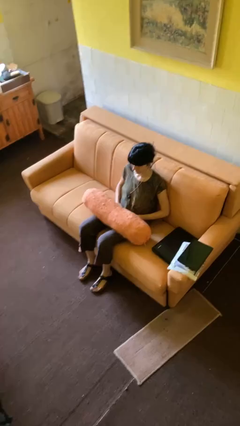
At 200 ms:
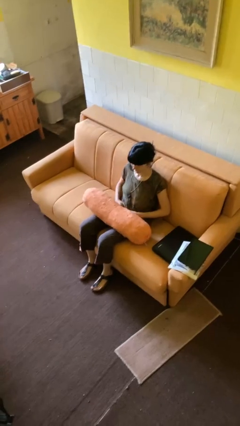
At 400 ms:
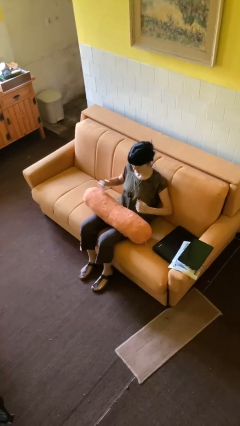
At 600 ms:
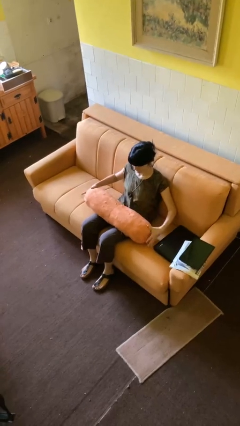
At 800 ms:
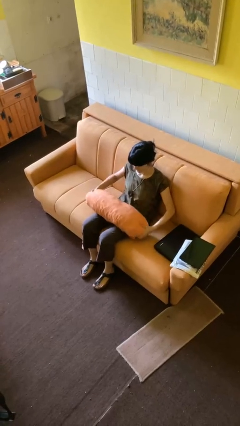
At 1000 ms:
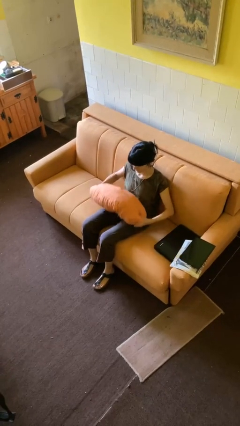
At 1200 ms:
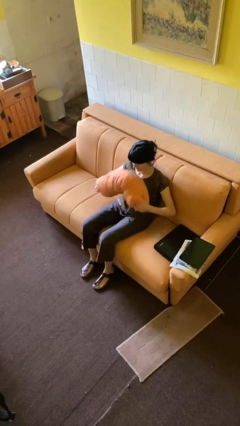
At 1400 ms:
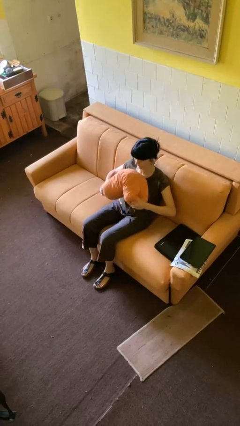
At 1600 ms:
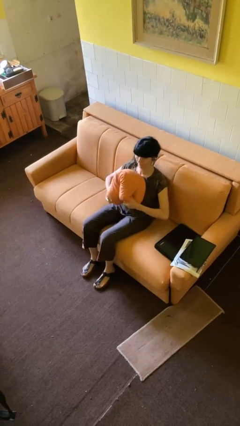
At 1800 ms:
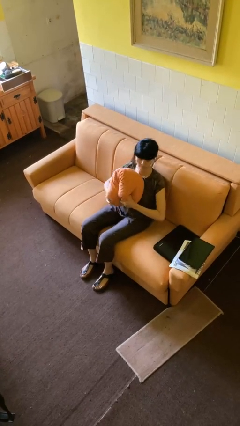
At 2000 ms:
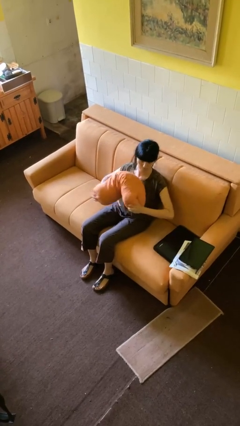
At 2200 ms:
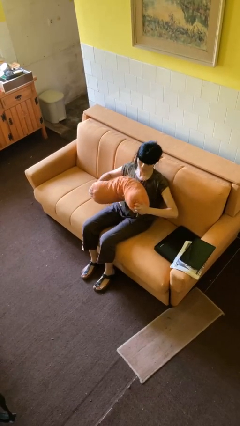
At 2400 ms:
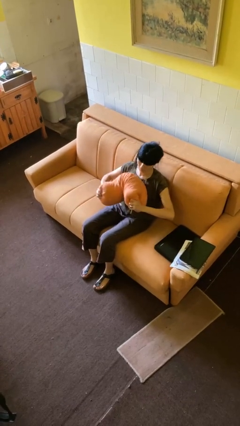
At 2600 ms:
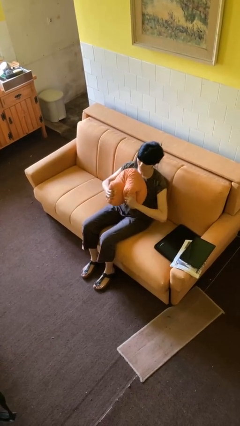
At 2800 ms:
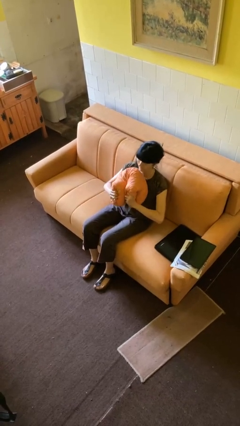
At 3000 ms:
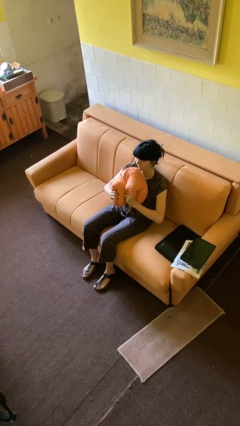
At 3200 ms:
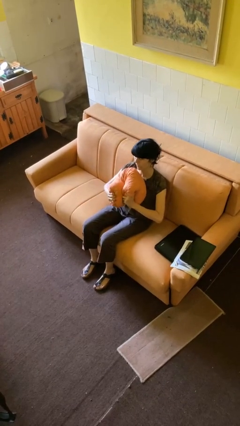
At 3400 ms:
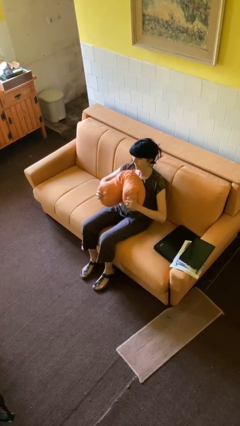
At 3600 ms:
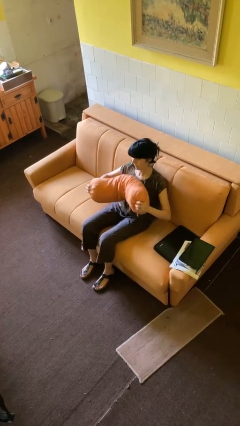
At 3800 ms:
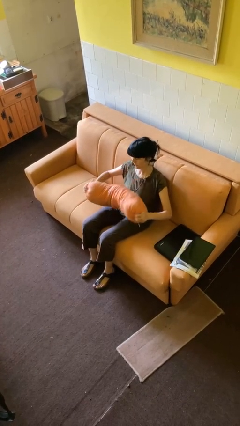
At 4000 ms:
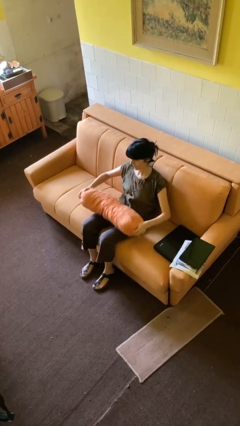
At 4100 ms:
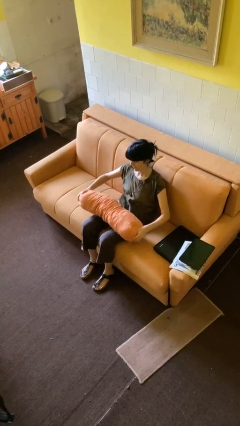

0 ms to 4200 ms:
person squeezes object

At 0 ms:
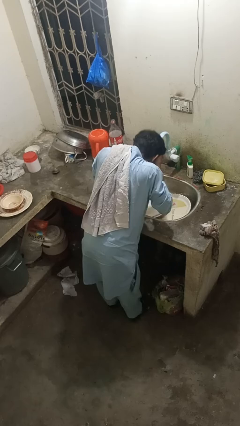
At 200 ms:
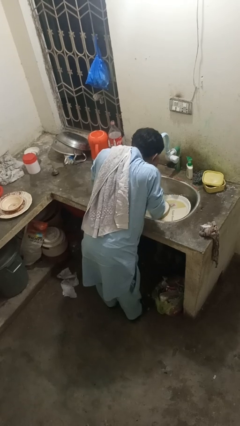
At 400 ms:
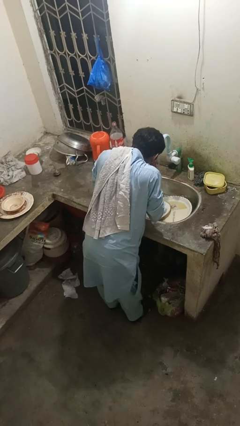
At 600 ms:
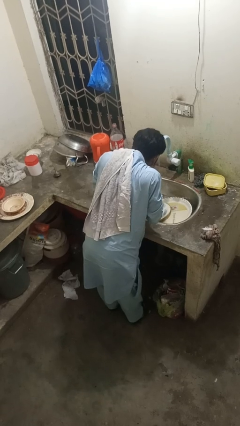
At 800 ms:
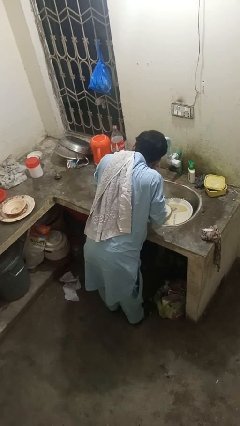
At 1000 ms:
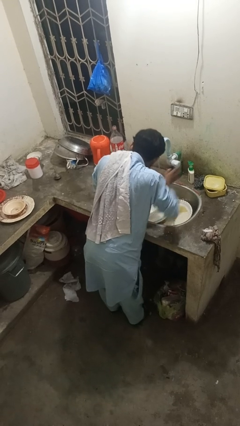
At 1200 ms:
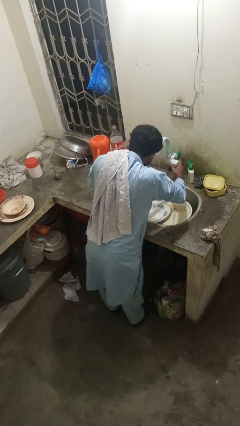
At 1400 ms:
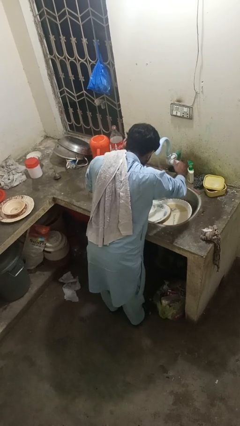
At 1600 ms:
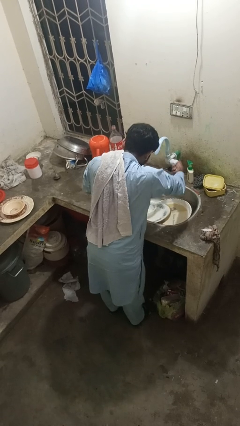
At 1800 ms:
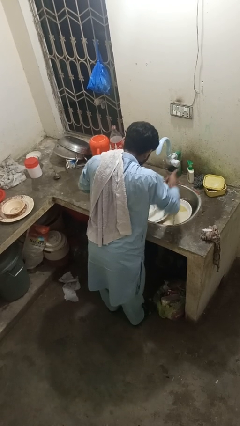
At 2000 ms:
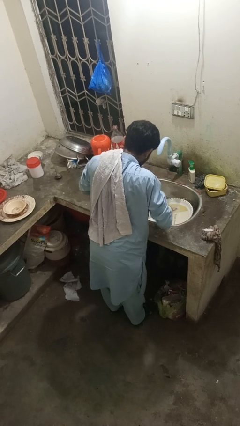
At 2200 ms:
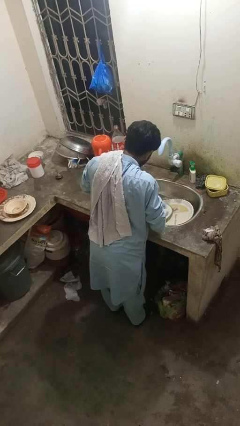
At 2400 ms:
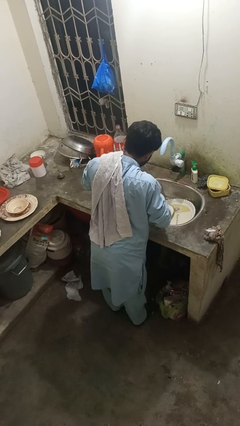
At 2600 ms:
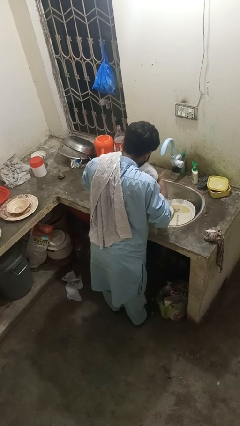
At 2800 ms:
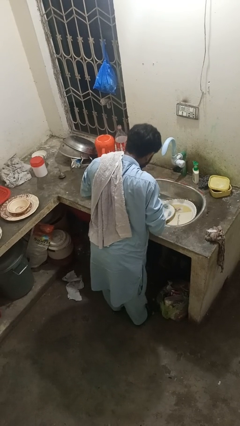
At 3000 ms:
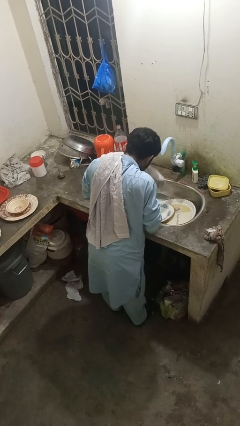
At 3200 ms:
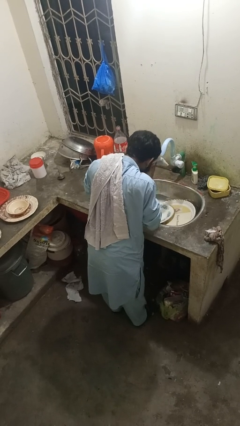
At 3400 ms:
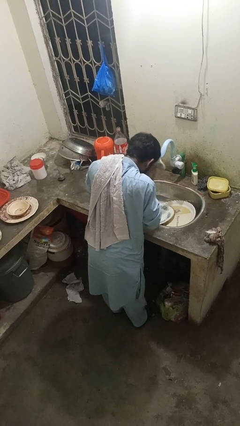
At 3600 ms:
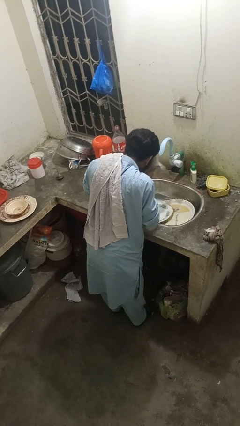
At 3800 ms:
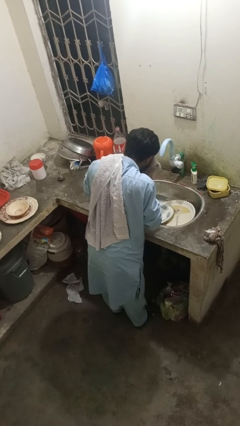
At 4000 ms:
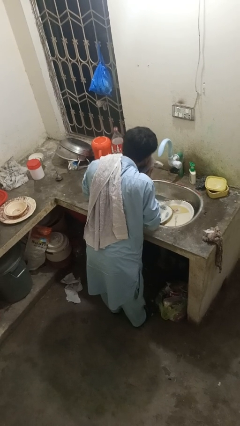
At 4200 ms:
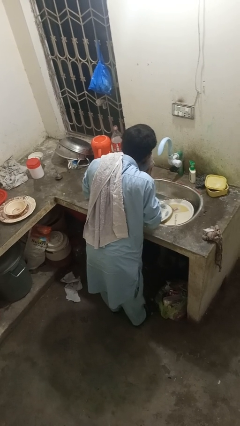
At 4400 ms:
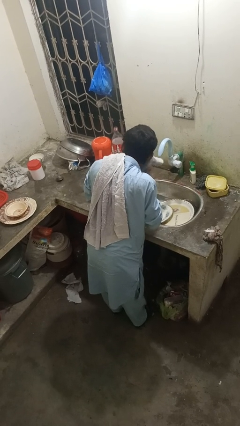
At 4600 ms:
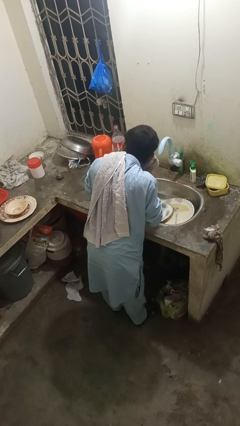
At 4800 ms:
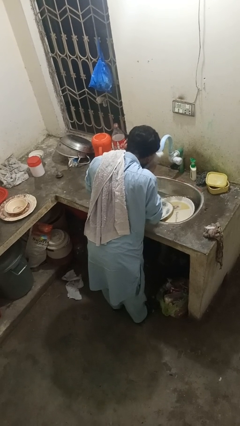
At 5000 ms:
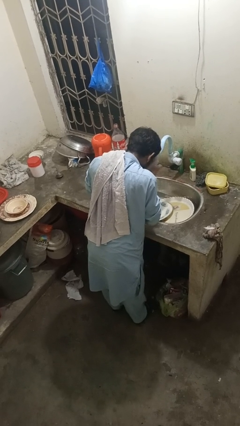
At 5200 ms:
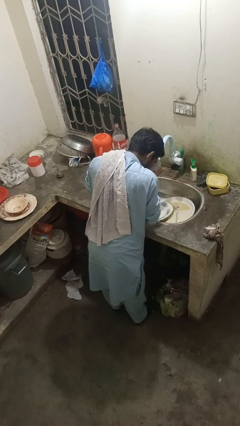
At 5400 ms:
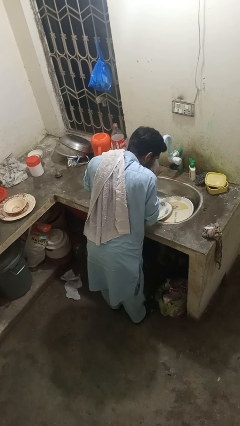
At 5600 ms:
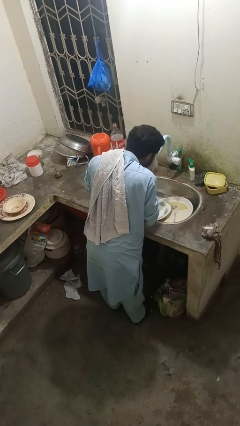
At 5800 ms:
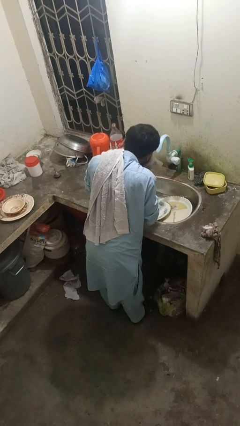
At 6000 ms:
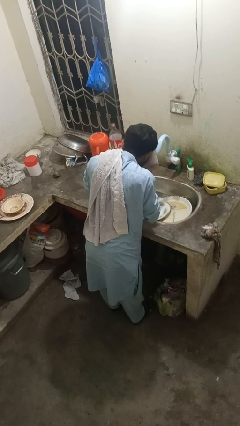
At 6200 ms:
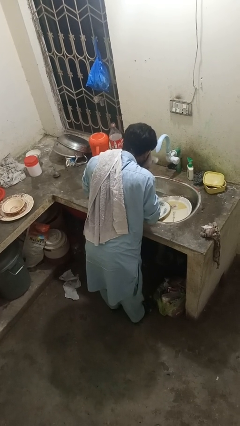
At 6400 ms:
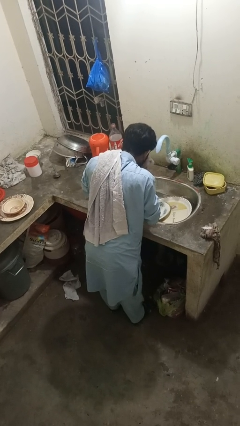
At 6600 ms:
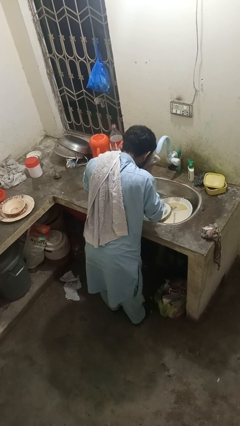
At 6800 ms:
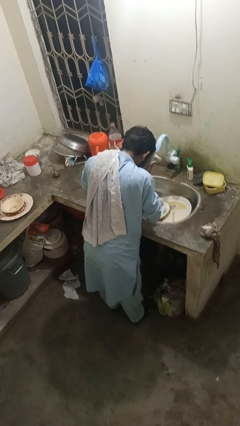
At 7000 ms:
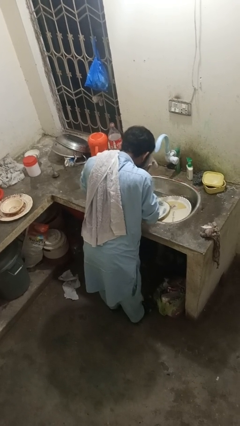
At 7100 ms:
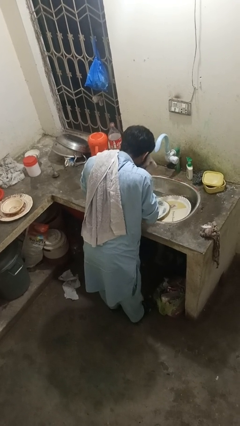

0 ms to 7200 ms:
person dries face with towel

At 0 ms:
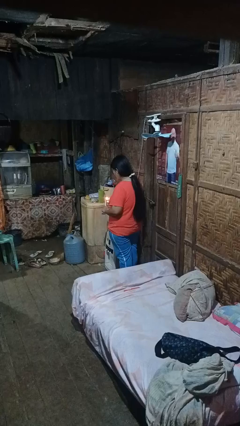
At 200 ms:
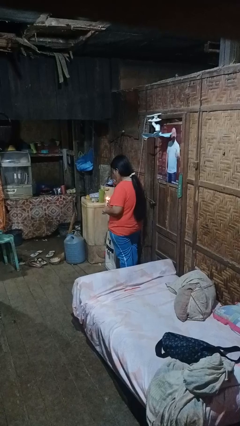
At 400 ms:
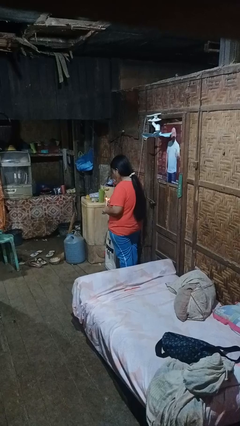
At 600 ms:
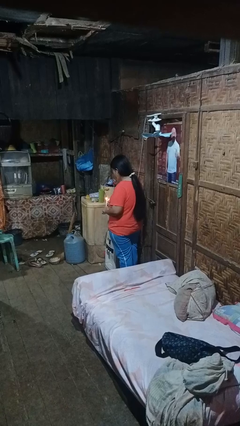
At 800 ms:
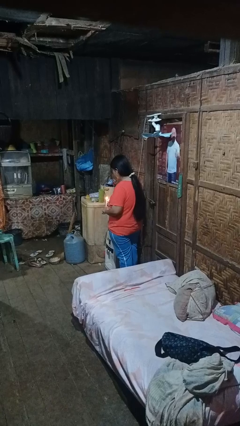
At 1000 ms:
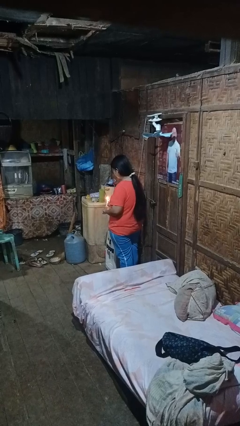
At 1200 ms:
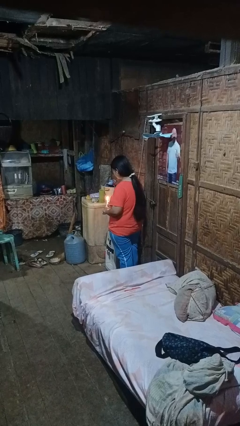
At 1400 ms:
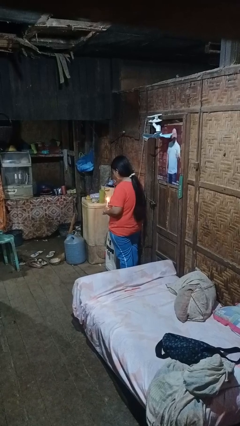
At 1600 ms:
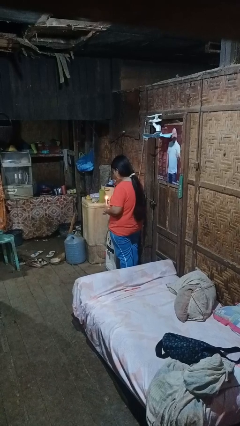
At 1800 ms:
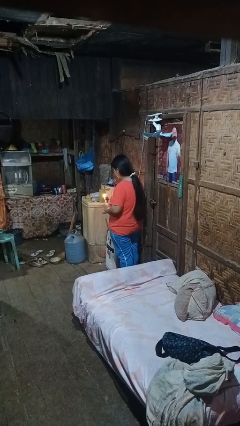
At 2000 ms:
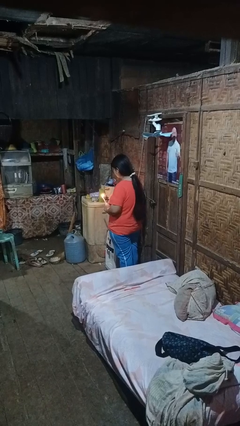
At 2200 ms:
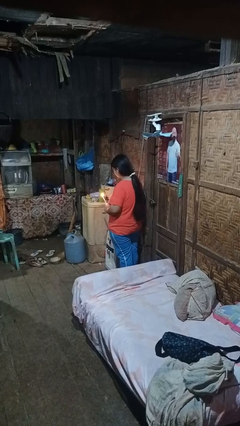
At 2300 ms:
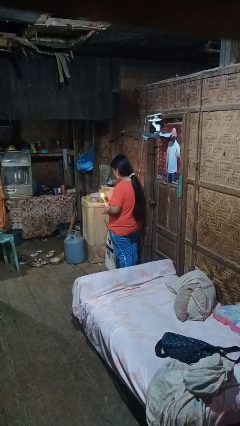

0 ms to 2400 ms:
person lights candle

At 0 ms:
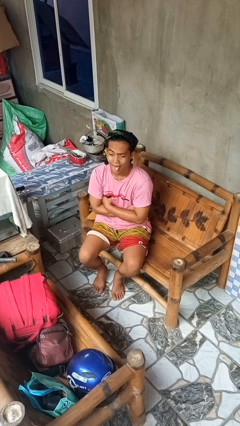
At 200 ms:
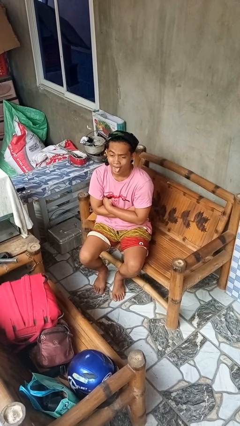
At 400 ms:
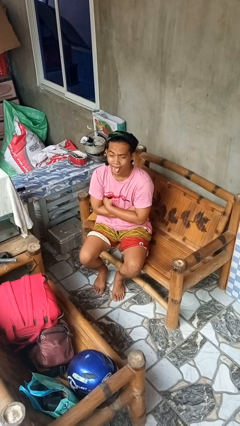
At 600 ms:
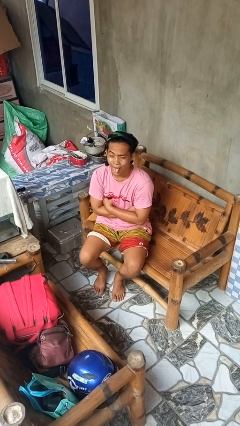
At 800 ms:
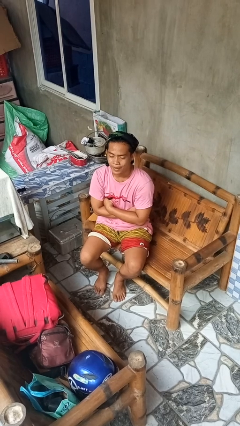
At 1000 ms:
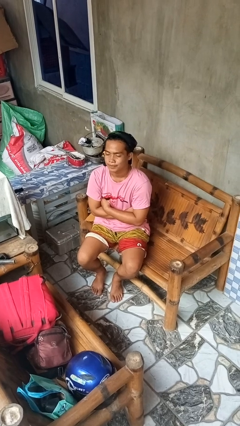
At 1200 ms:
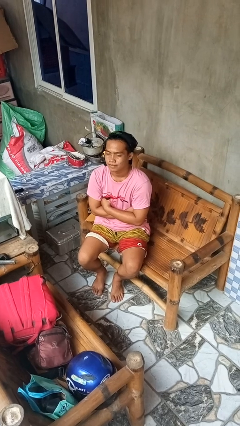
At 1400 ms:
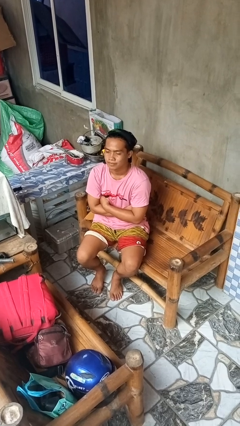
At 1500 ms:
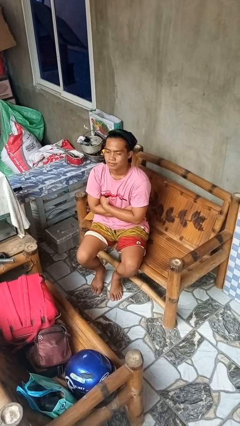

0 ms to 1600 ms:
person sticks out tongue

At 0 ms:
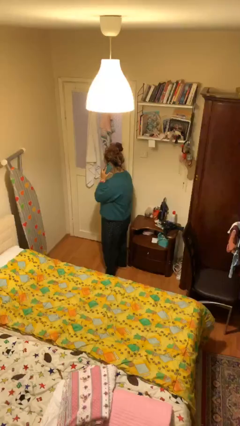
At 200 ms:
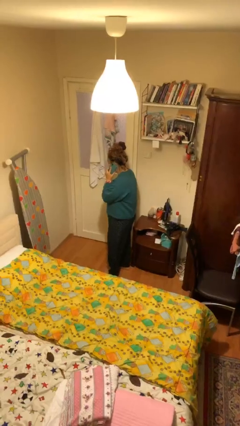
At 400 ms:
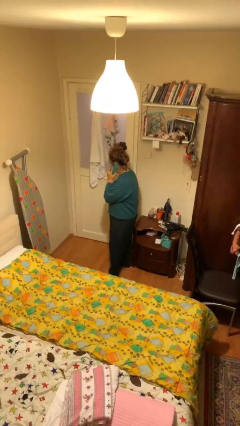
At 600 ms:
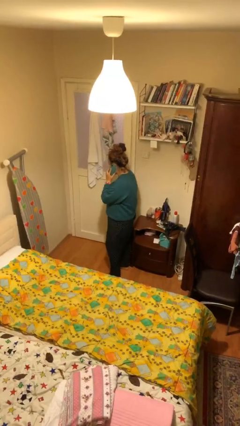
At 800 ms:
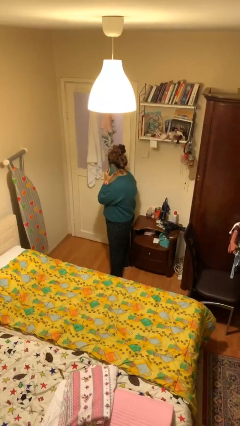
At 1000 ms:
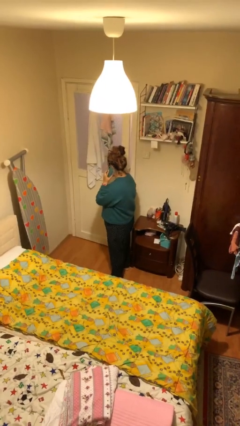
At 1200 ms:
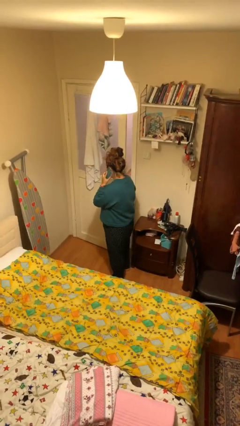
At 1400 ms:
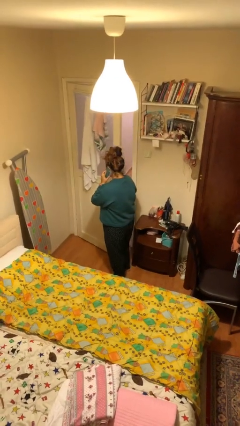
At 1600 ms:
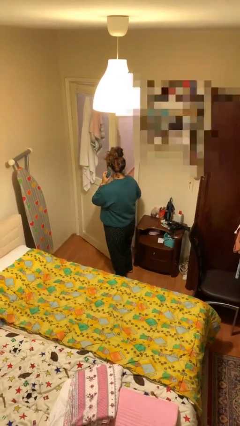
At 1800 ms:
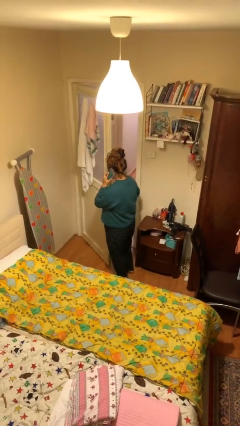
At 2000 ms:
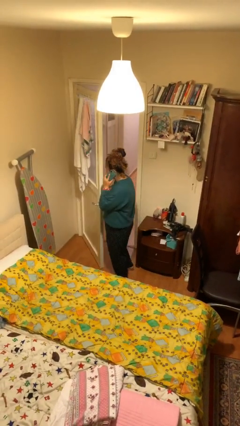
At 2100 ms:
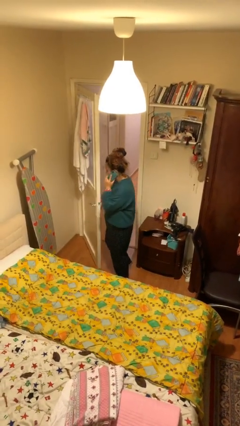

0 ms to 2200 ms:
person opens facility door
